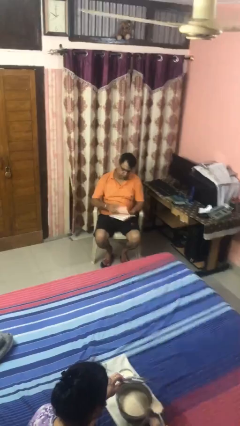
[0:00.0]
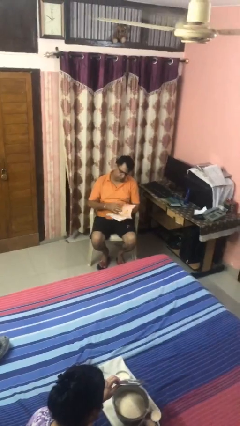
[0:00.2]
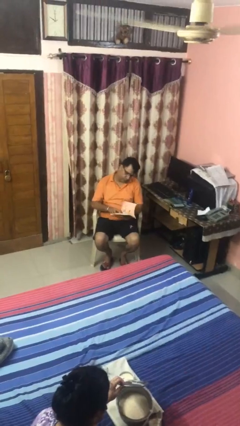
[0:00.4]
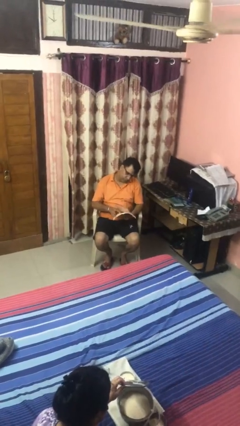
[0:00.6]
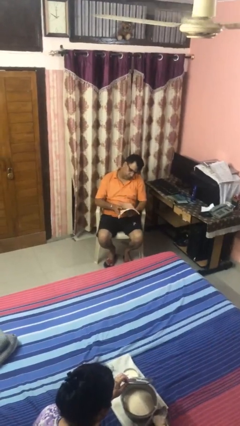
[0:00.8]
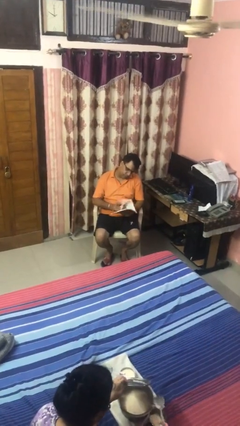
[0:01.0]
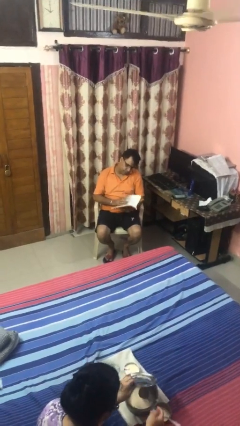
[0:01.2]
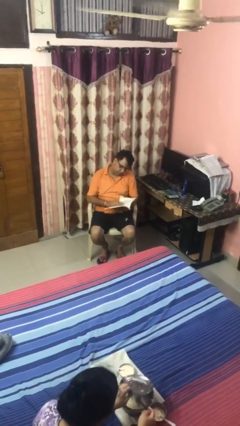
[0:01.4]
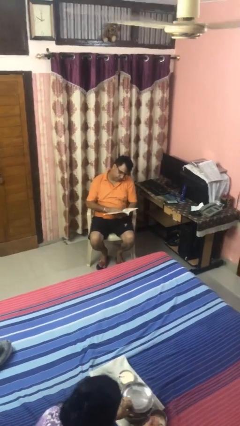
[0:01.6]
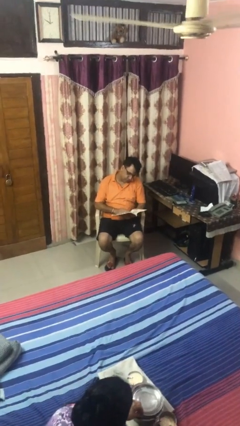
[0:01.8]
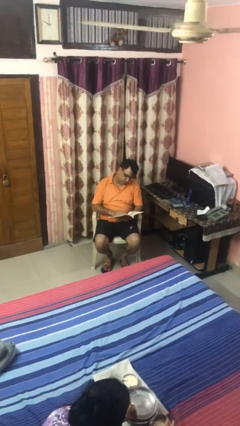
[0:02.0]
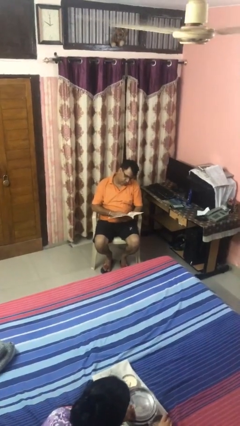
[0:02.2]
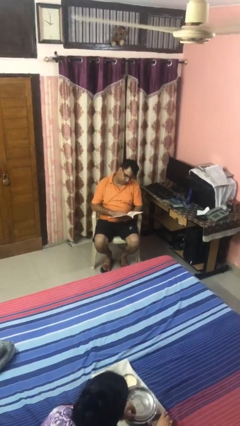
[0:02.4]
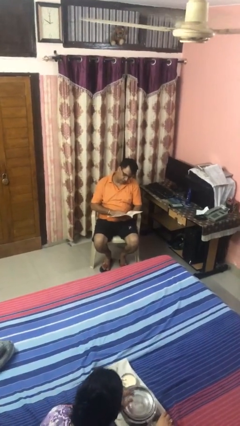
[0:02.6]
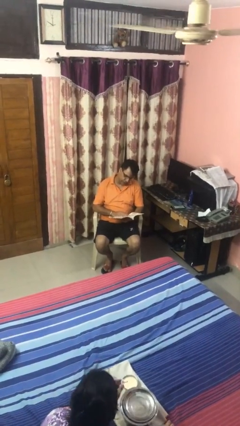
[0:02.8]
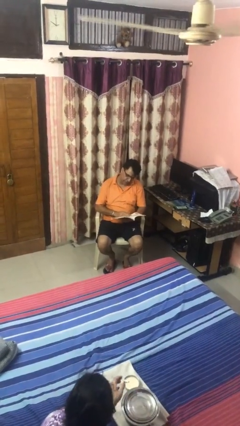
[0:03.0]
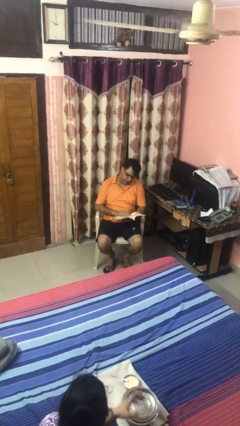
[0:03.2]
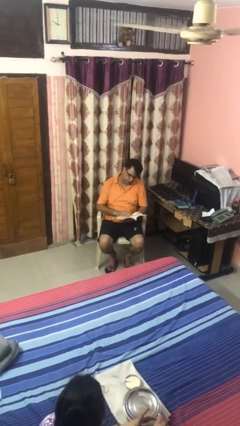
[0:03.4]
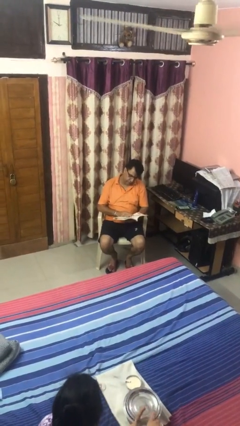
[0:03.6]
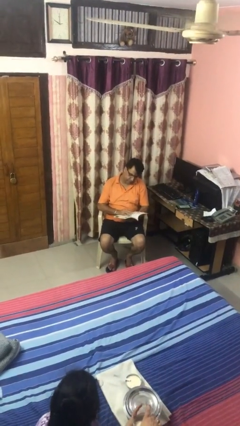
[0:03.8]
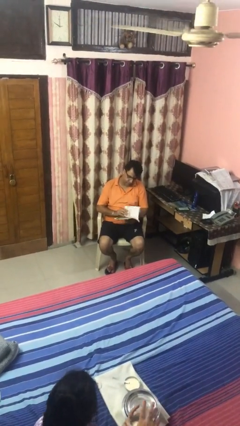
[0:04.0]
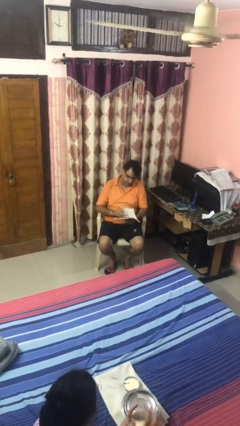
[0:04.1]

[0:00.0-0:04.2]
person reads book

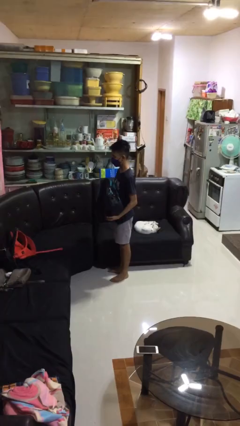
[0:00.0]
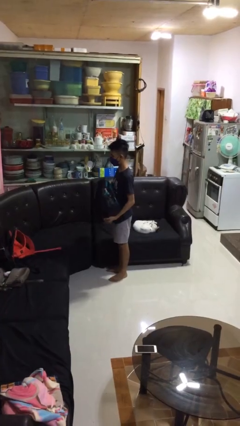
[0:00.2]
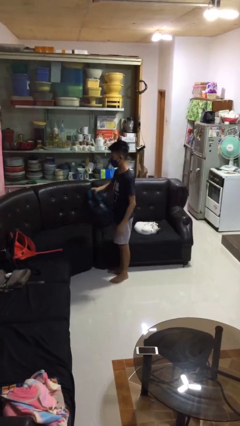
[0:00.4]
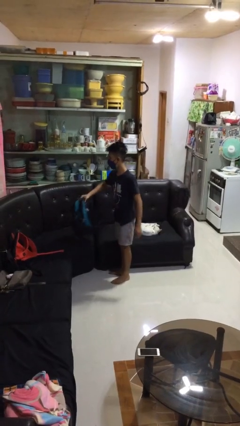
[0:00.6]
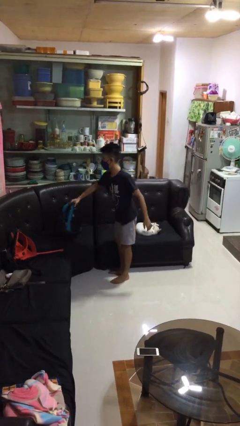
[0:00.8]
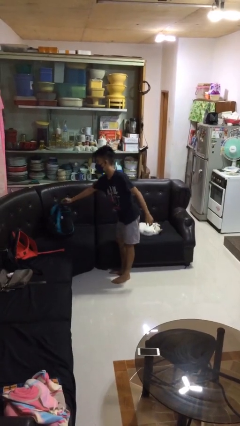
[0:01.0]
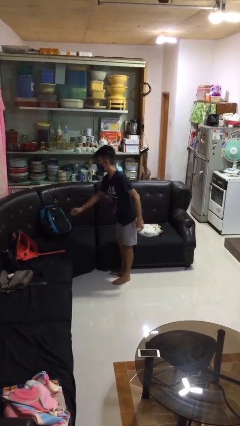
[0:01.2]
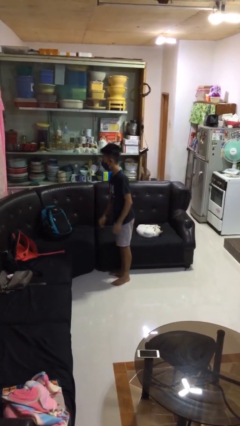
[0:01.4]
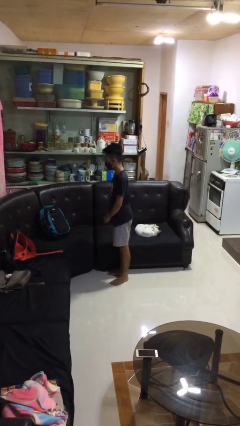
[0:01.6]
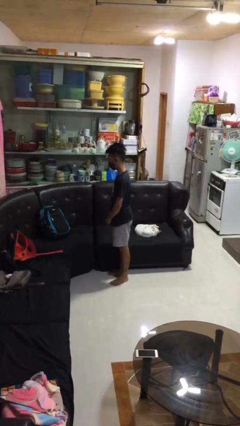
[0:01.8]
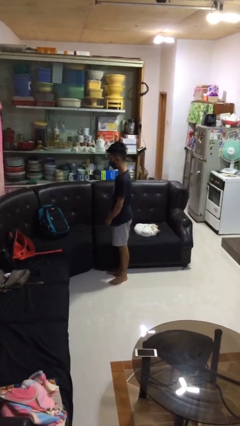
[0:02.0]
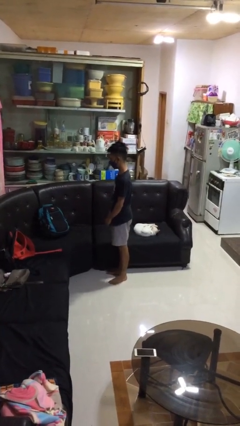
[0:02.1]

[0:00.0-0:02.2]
person puts down object on couch

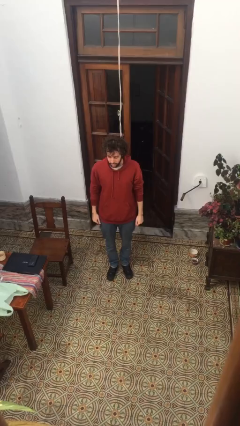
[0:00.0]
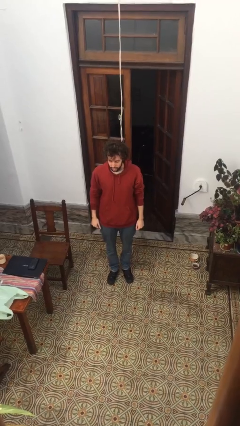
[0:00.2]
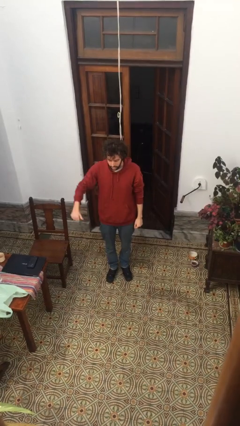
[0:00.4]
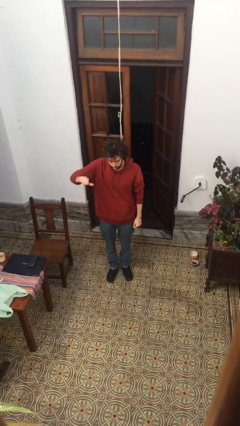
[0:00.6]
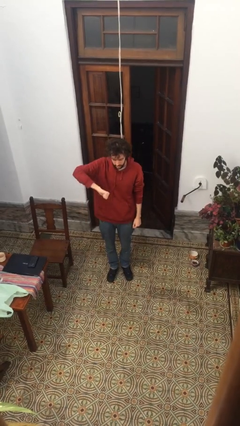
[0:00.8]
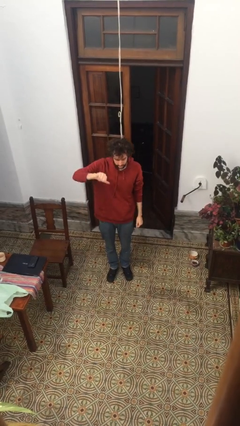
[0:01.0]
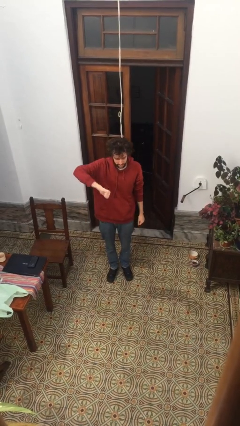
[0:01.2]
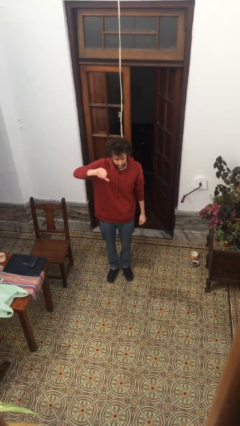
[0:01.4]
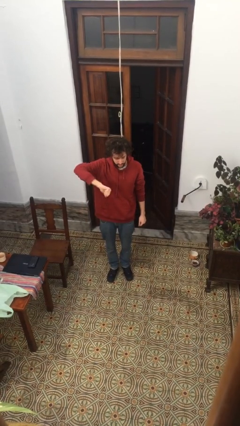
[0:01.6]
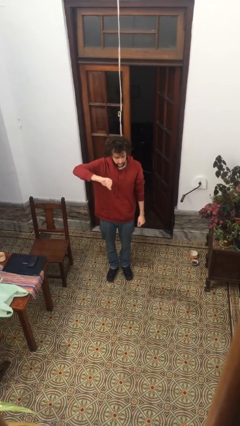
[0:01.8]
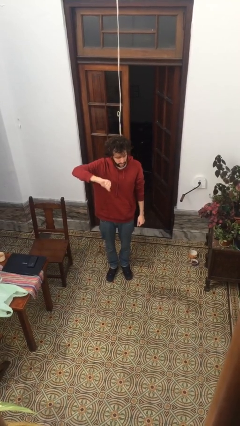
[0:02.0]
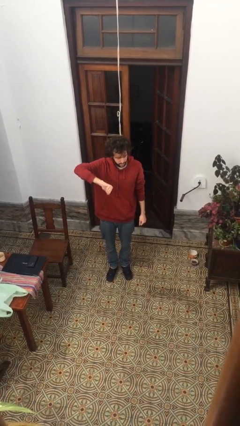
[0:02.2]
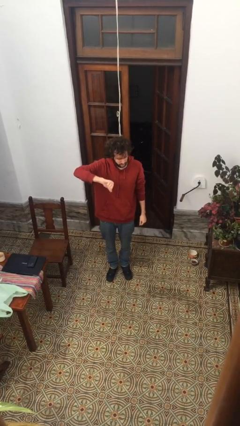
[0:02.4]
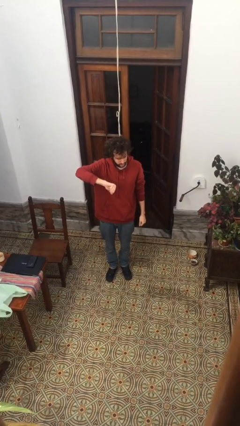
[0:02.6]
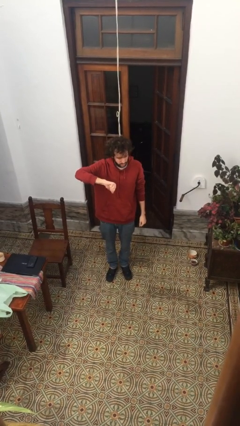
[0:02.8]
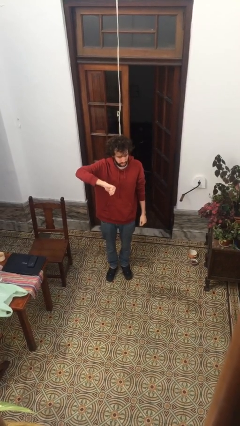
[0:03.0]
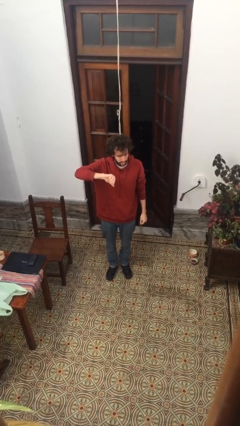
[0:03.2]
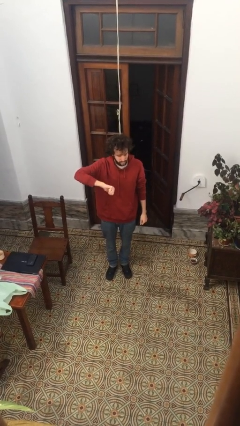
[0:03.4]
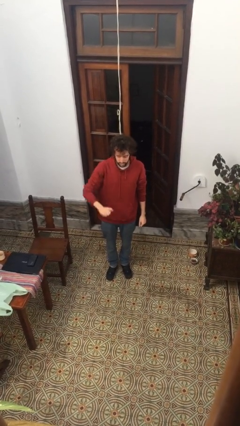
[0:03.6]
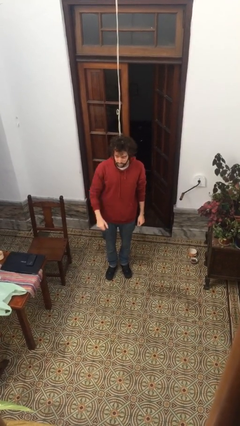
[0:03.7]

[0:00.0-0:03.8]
person gestures thumbs down

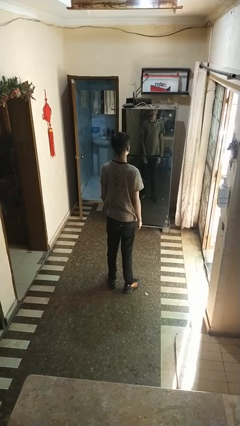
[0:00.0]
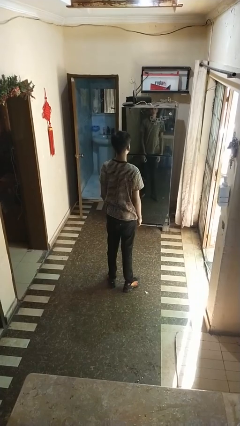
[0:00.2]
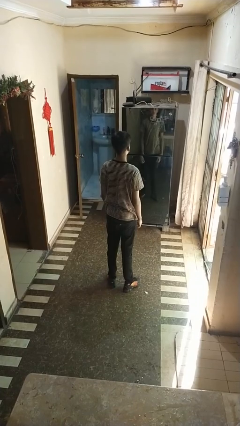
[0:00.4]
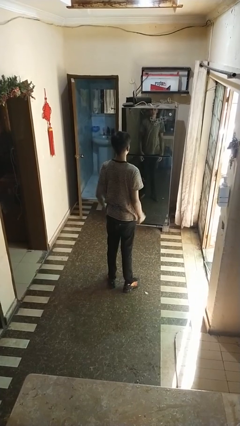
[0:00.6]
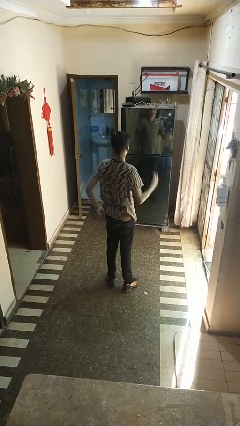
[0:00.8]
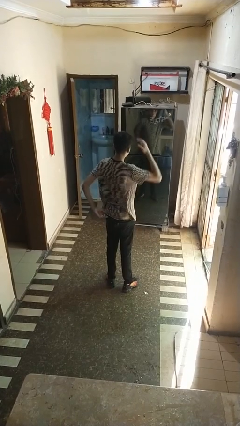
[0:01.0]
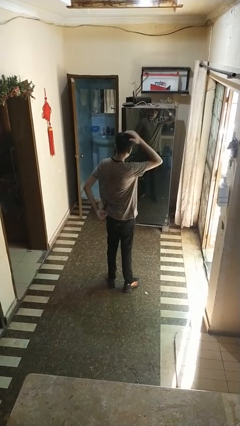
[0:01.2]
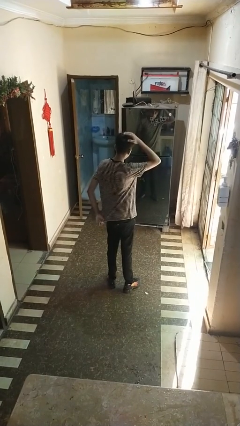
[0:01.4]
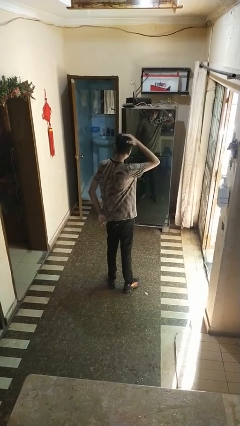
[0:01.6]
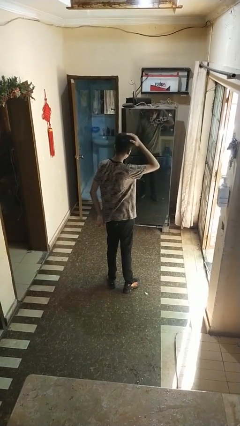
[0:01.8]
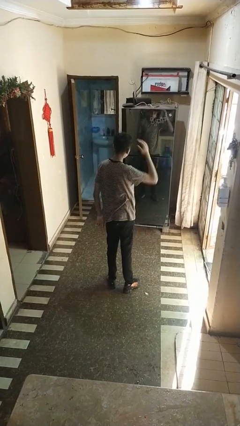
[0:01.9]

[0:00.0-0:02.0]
person pats head

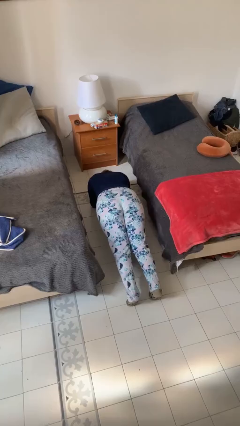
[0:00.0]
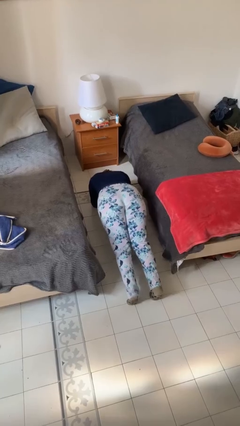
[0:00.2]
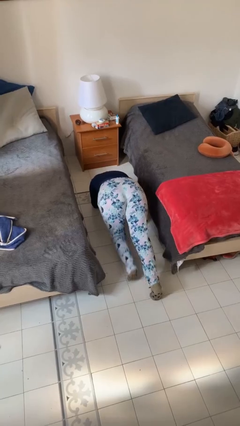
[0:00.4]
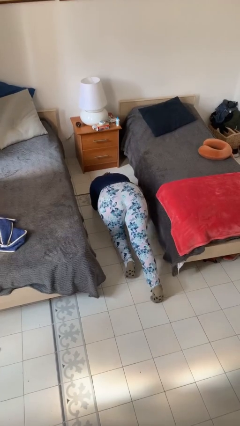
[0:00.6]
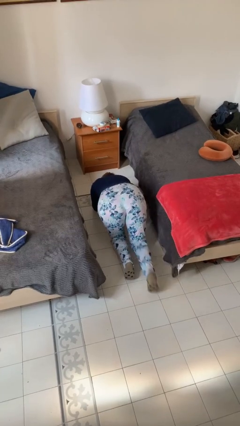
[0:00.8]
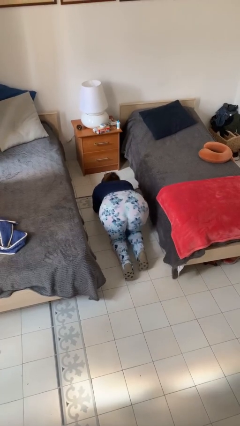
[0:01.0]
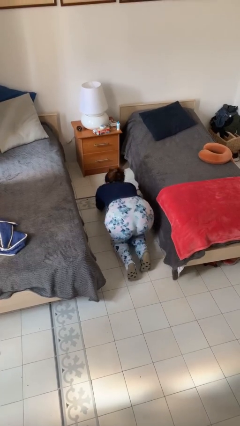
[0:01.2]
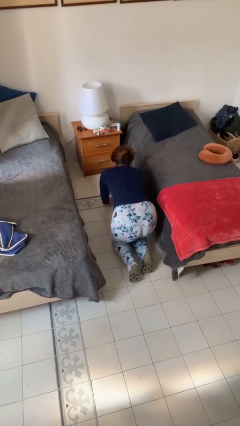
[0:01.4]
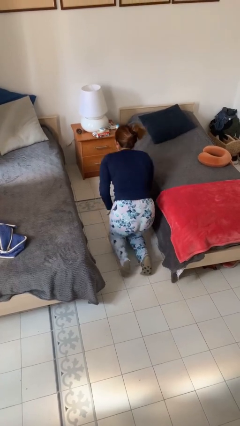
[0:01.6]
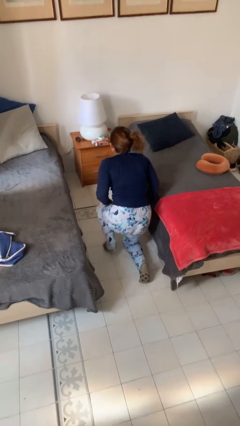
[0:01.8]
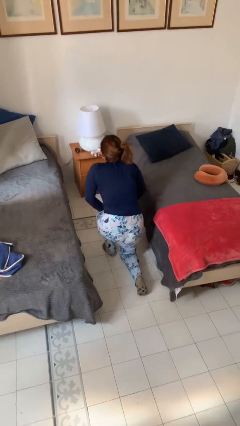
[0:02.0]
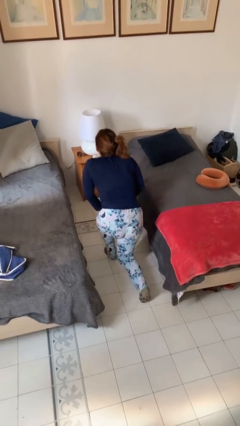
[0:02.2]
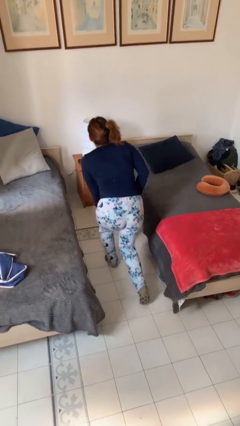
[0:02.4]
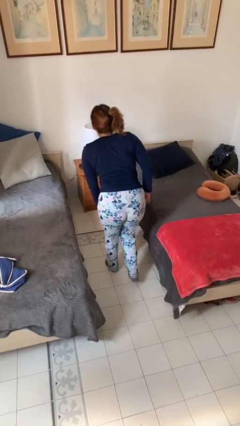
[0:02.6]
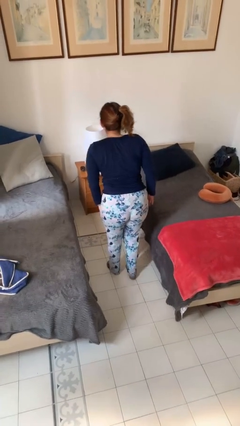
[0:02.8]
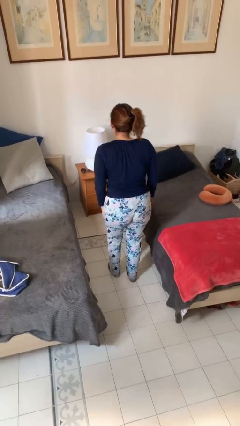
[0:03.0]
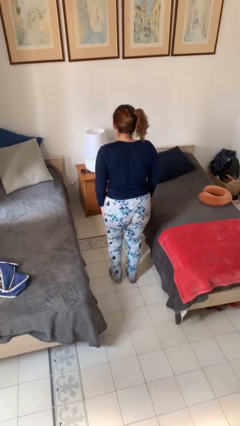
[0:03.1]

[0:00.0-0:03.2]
person stands up from floor

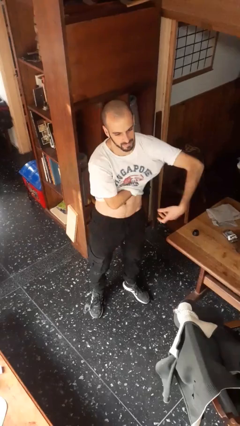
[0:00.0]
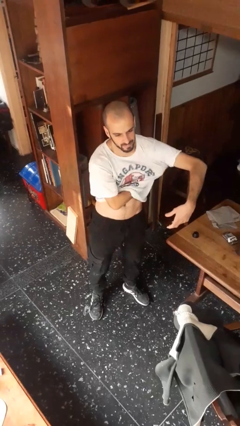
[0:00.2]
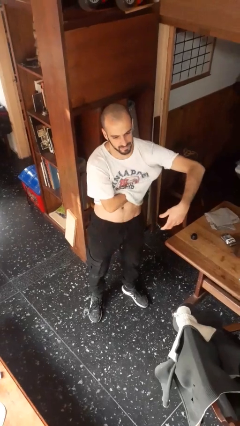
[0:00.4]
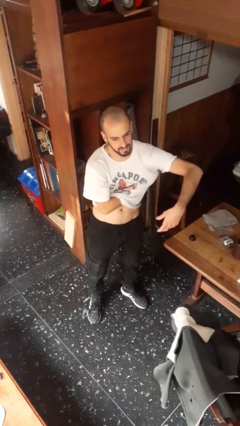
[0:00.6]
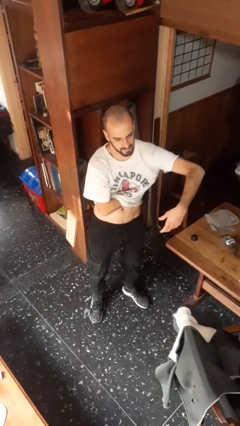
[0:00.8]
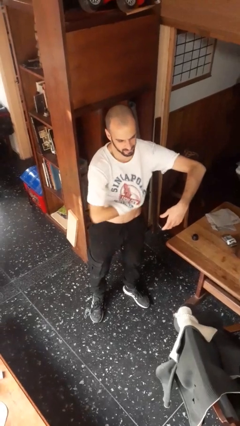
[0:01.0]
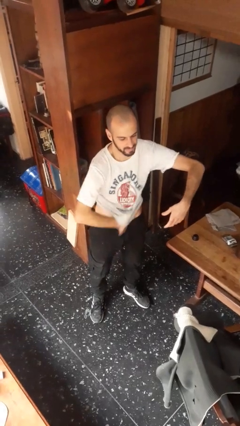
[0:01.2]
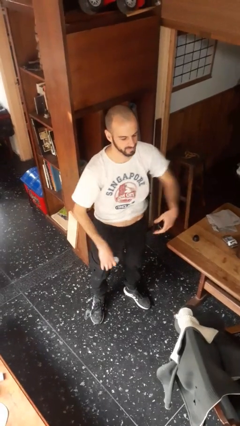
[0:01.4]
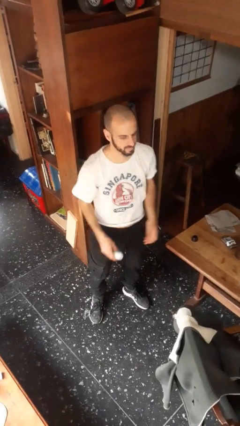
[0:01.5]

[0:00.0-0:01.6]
person applies deodorant
